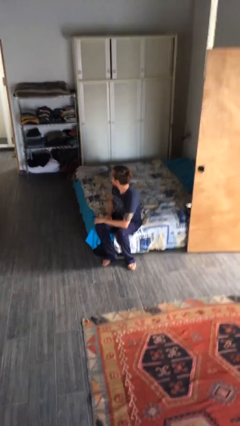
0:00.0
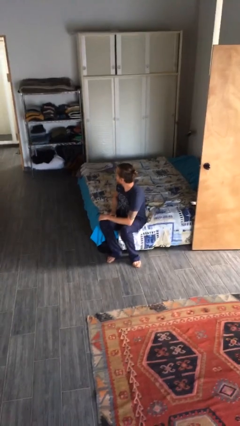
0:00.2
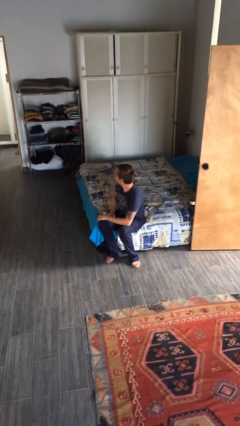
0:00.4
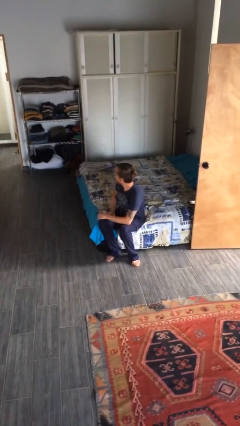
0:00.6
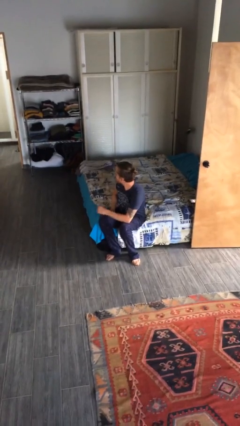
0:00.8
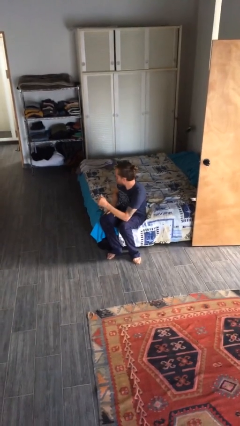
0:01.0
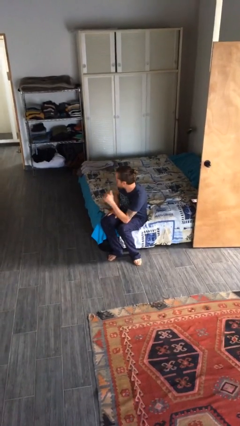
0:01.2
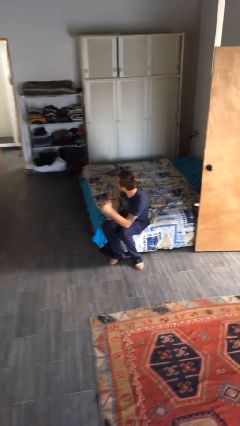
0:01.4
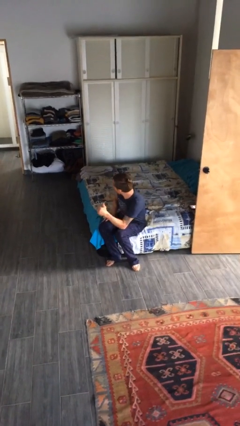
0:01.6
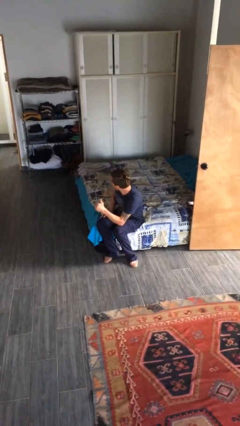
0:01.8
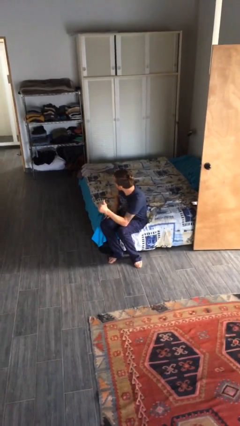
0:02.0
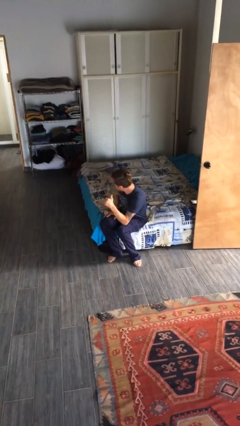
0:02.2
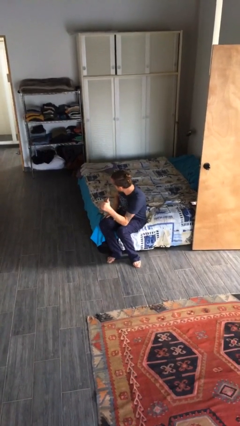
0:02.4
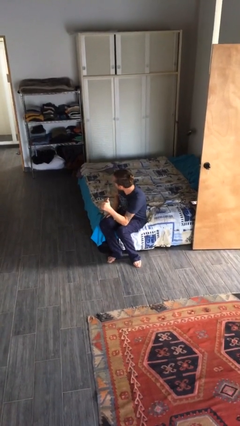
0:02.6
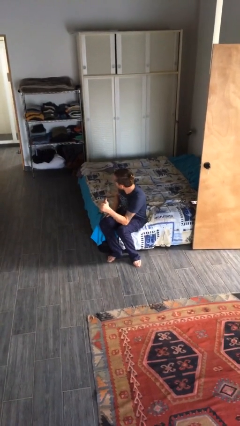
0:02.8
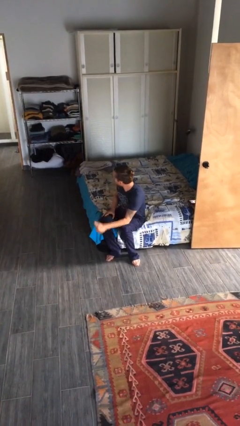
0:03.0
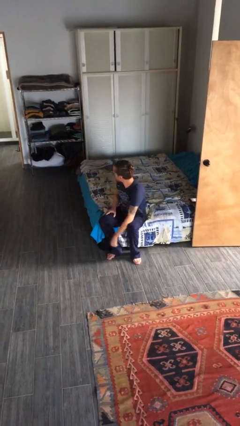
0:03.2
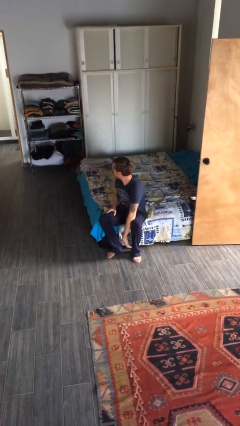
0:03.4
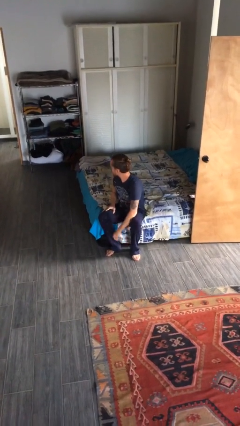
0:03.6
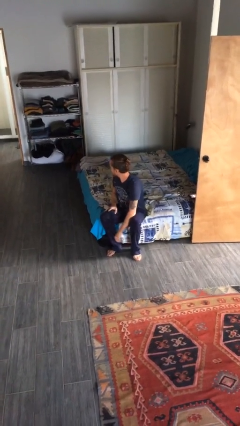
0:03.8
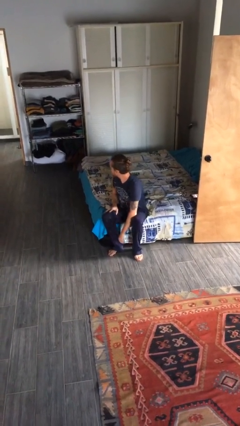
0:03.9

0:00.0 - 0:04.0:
person gestures thumbs up

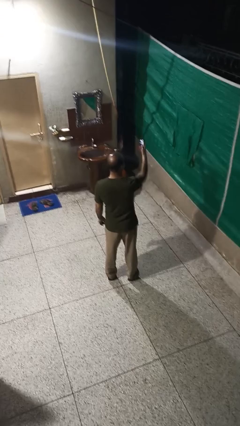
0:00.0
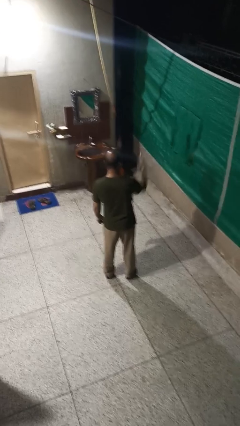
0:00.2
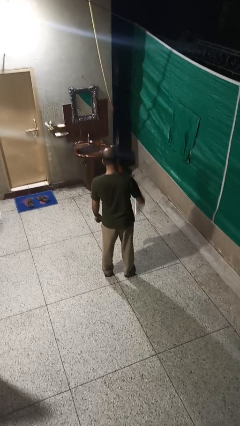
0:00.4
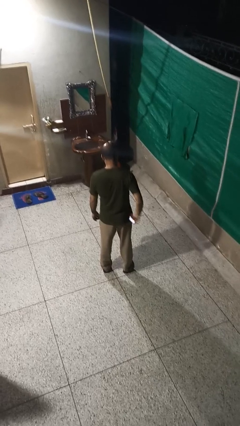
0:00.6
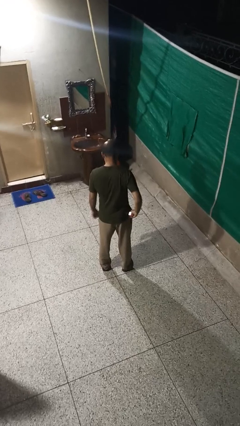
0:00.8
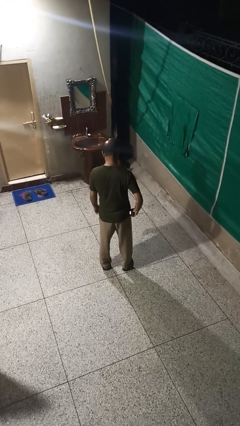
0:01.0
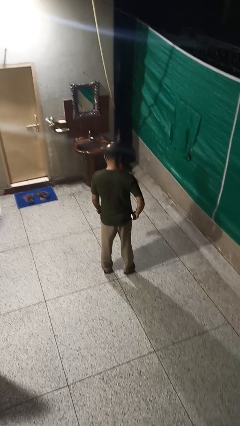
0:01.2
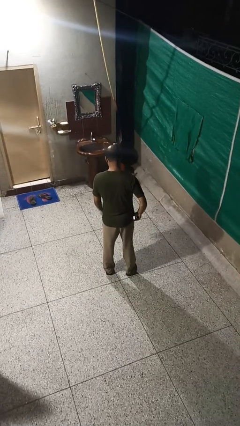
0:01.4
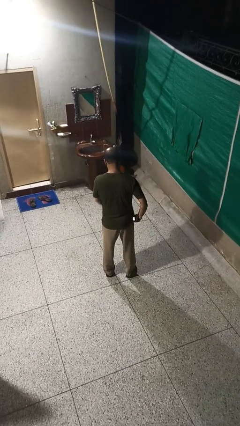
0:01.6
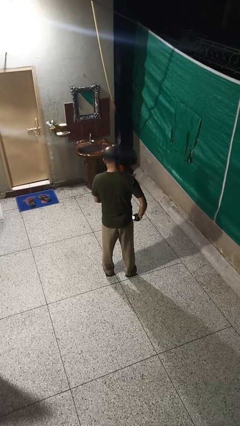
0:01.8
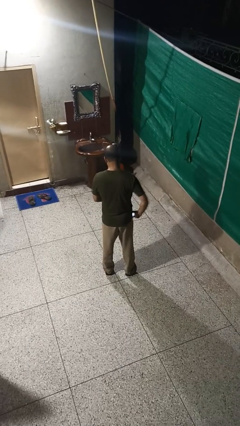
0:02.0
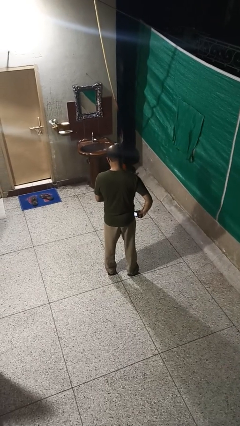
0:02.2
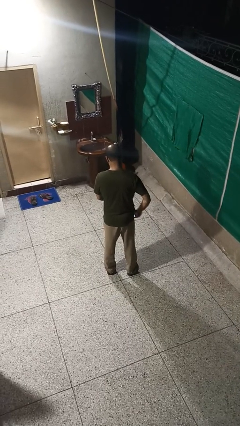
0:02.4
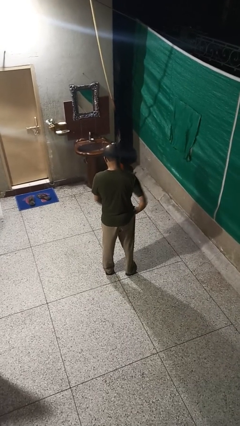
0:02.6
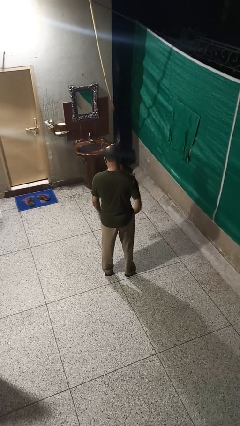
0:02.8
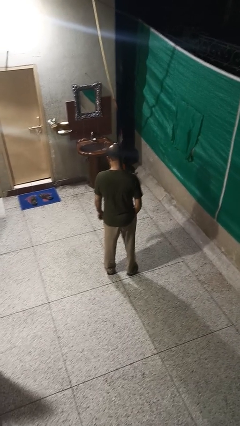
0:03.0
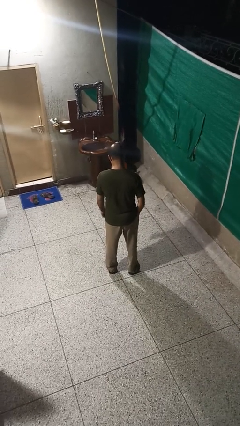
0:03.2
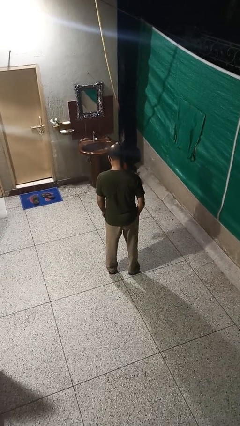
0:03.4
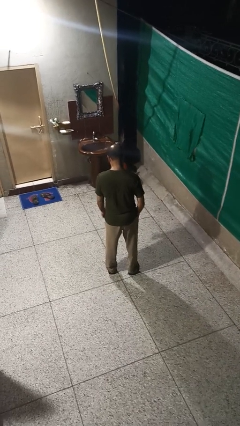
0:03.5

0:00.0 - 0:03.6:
person puts phone into pocket

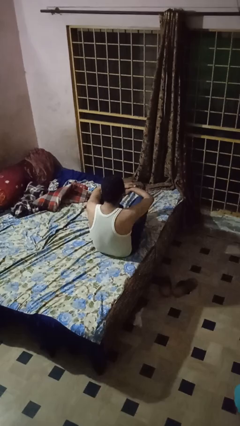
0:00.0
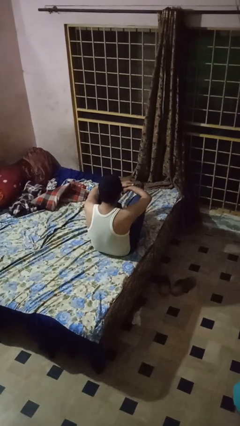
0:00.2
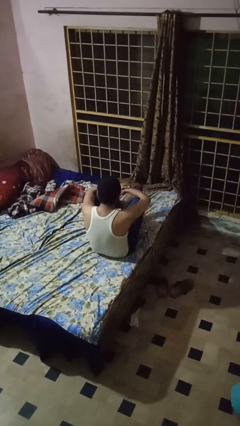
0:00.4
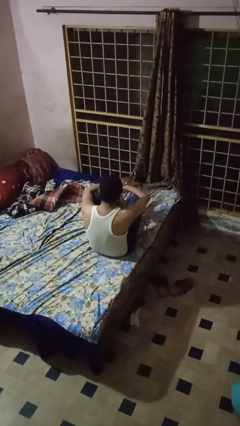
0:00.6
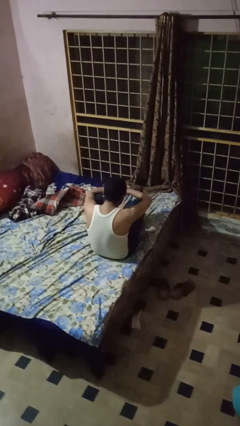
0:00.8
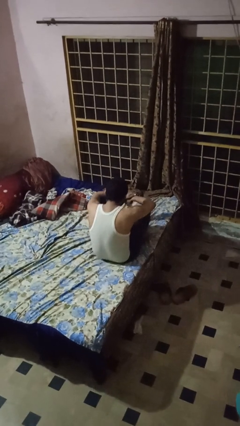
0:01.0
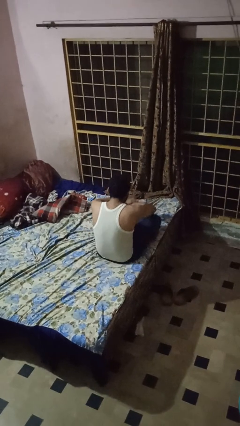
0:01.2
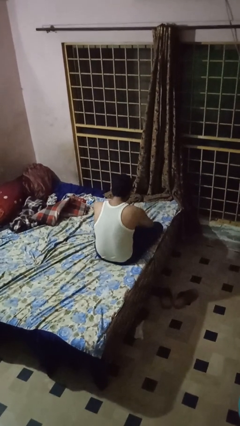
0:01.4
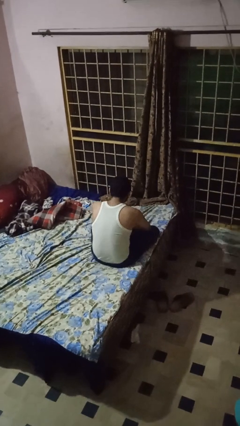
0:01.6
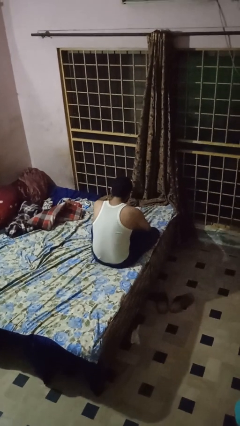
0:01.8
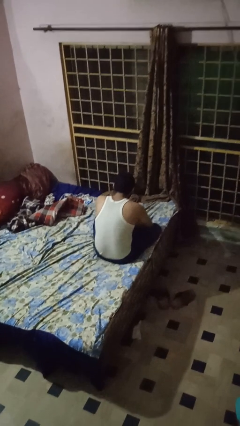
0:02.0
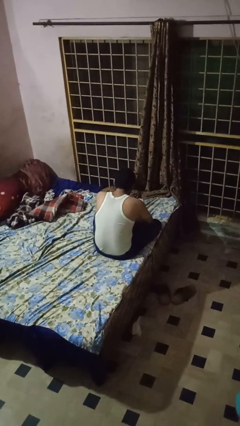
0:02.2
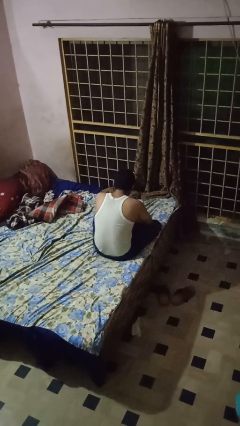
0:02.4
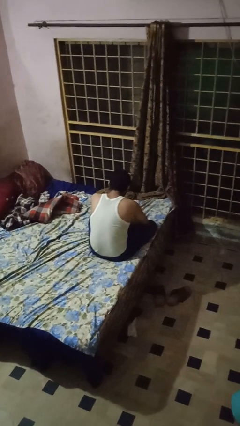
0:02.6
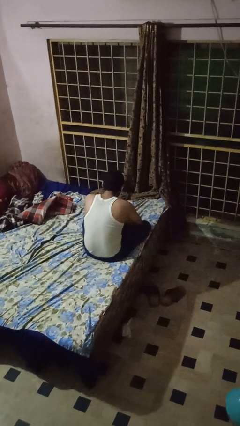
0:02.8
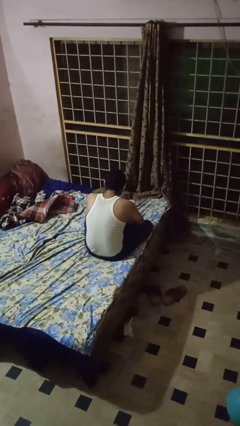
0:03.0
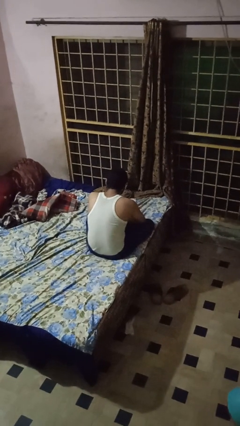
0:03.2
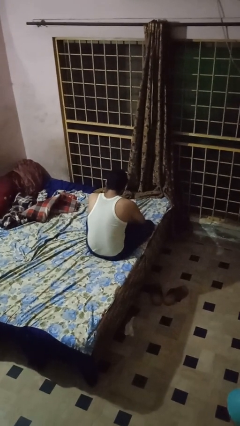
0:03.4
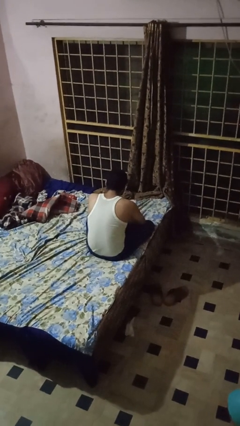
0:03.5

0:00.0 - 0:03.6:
person crosses legs

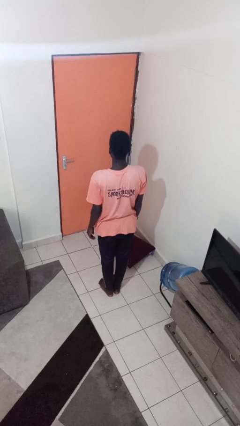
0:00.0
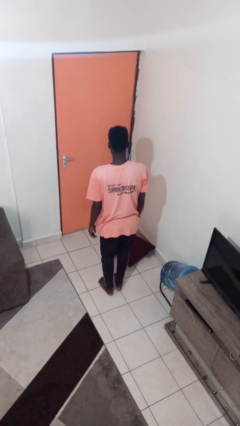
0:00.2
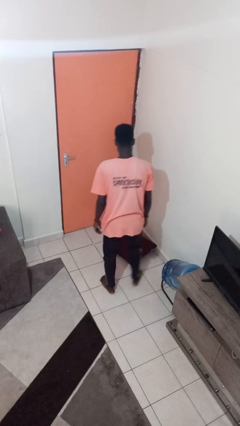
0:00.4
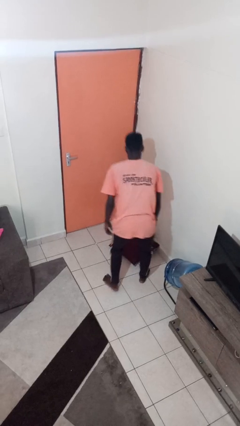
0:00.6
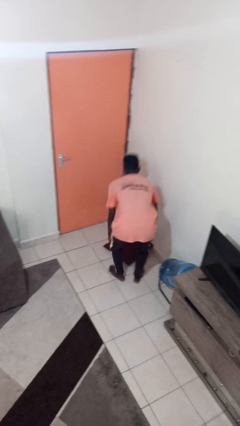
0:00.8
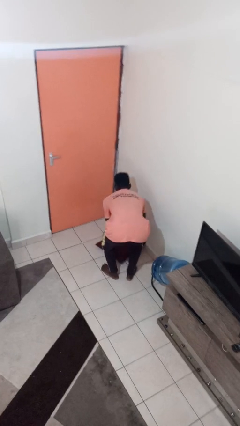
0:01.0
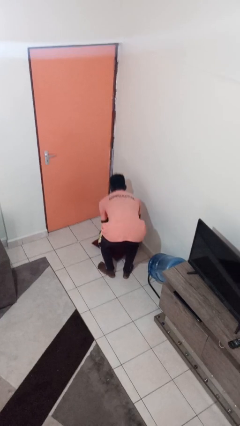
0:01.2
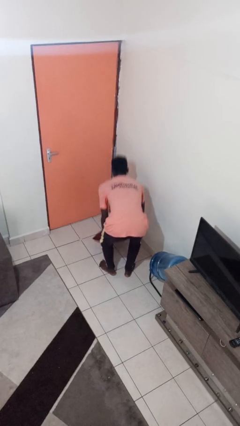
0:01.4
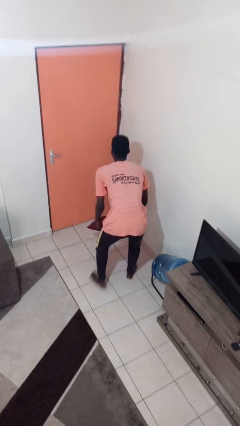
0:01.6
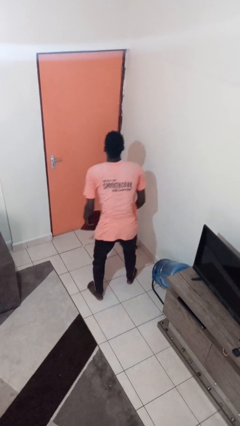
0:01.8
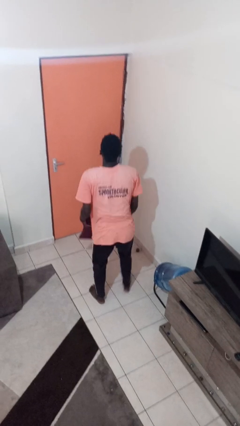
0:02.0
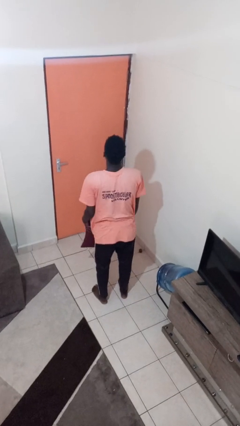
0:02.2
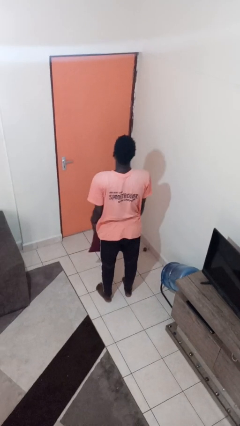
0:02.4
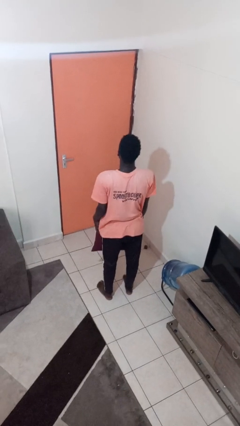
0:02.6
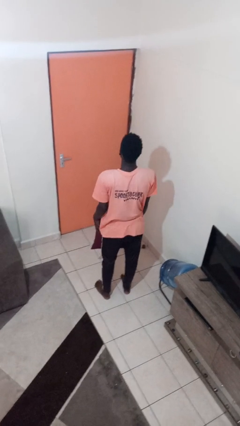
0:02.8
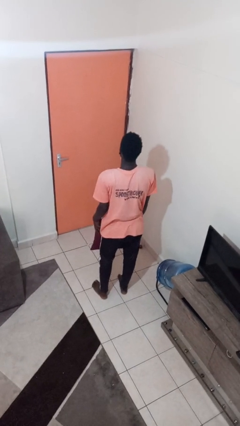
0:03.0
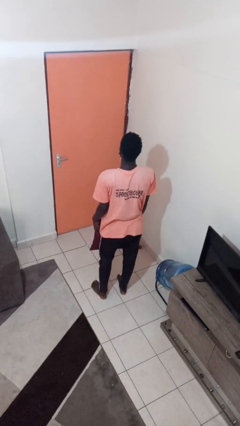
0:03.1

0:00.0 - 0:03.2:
person picks up object from floor

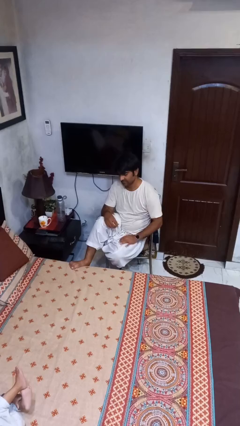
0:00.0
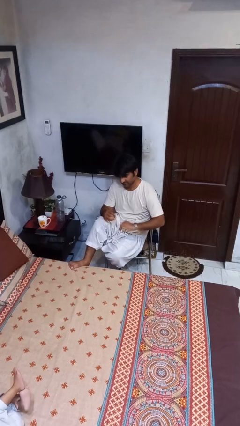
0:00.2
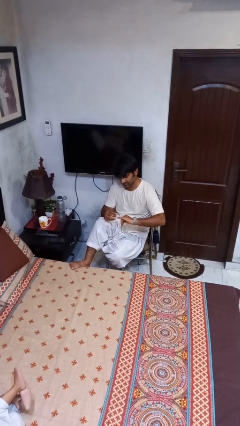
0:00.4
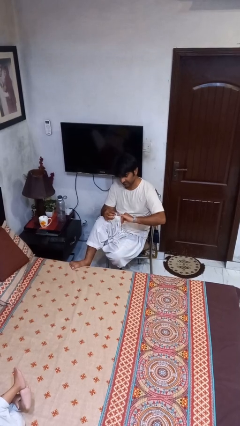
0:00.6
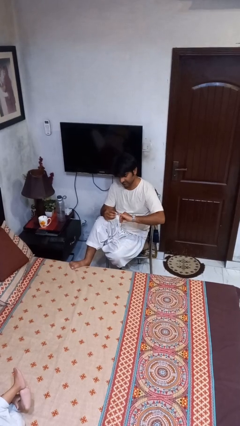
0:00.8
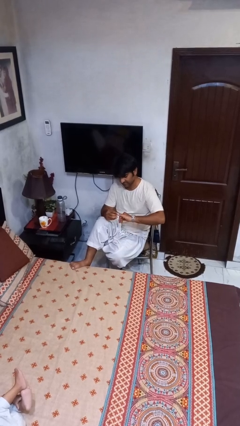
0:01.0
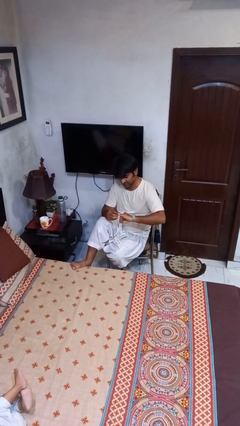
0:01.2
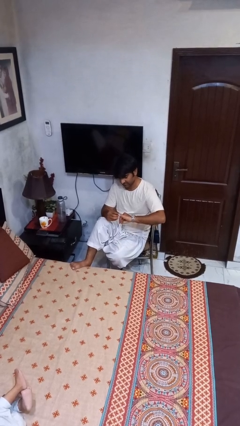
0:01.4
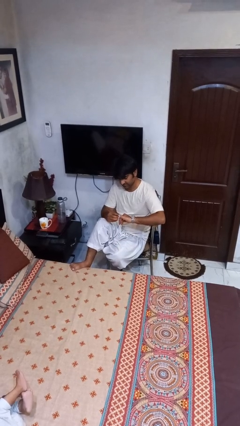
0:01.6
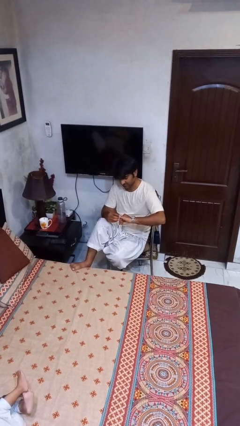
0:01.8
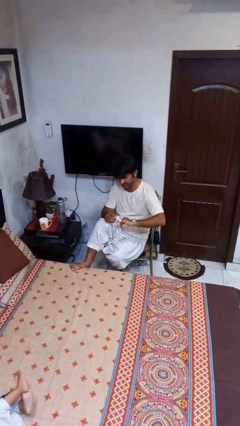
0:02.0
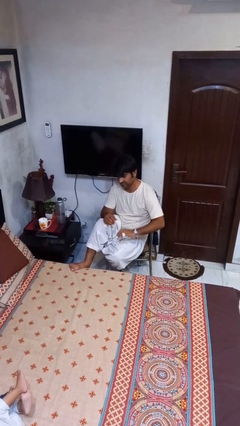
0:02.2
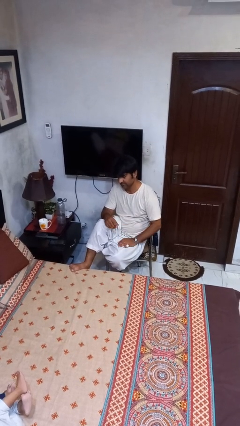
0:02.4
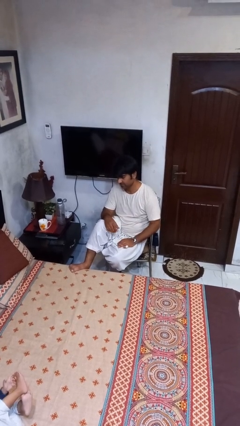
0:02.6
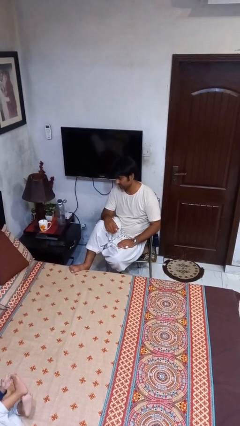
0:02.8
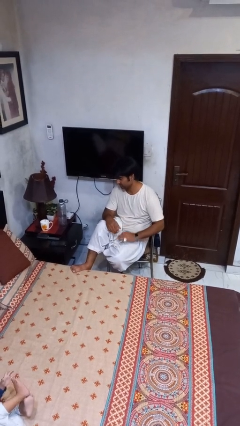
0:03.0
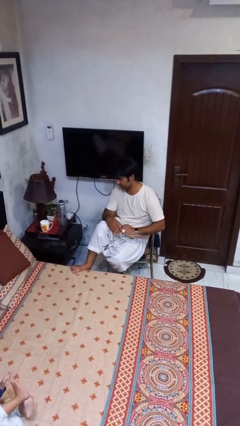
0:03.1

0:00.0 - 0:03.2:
person puts on ring
